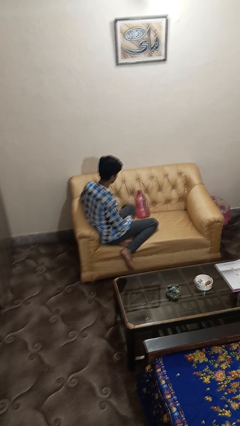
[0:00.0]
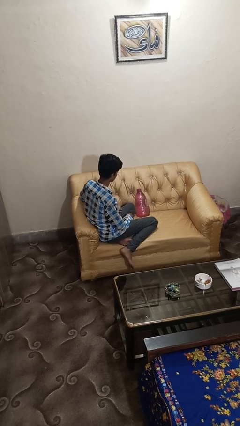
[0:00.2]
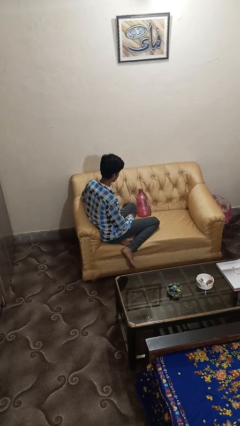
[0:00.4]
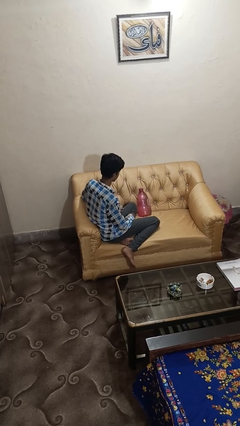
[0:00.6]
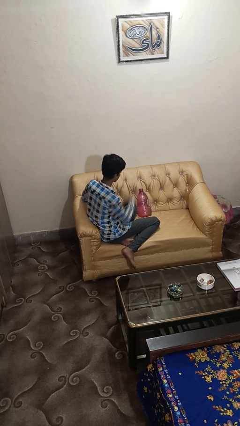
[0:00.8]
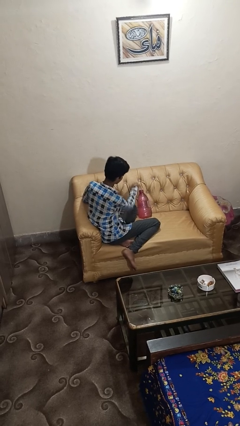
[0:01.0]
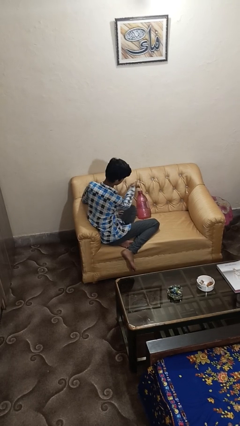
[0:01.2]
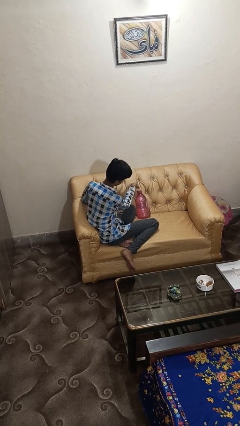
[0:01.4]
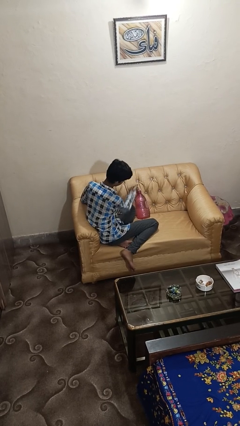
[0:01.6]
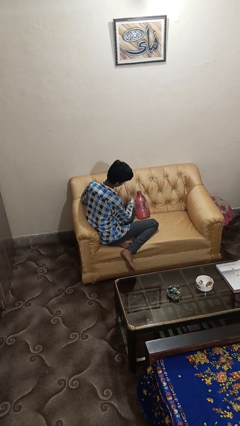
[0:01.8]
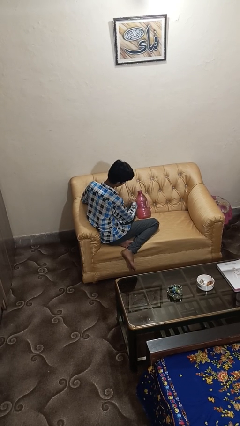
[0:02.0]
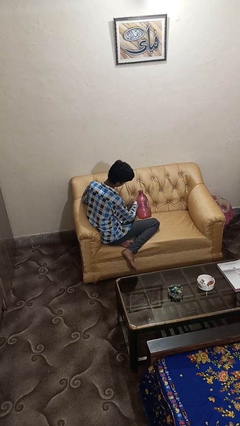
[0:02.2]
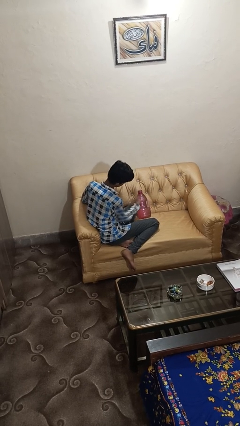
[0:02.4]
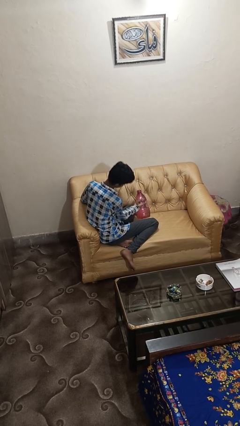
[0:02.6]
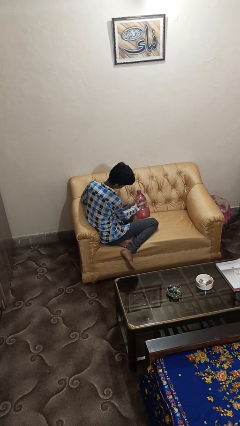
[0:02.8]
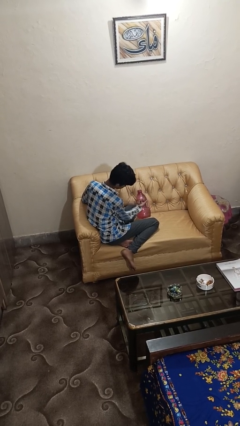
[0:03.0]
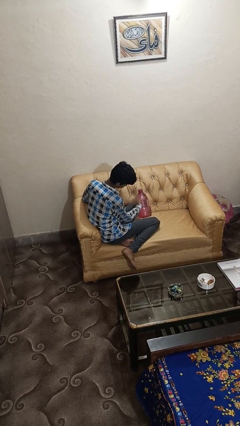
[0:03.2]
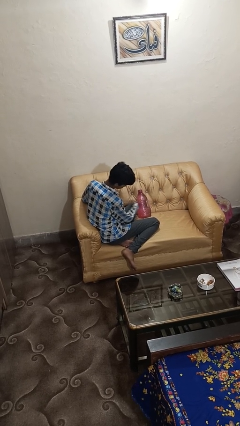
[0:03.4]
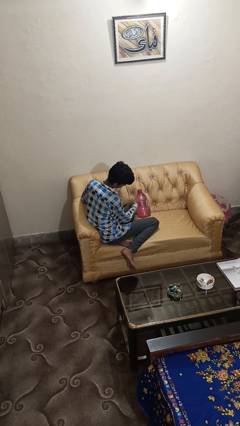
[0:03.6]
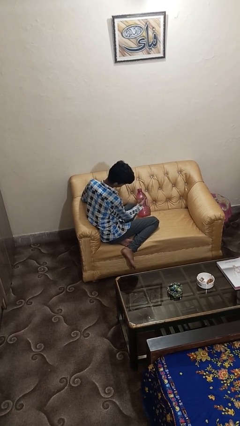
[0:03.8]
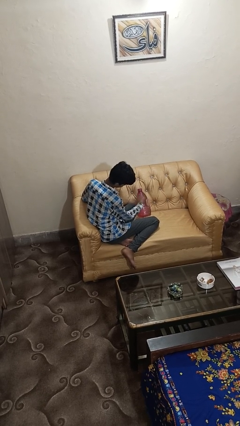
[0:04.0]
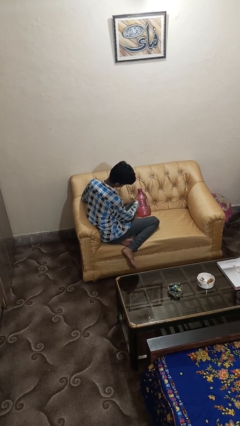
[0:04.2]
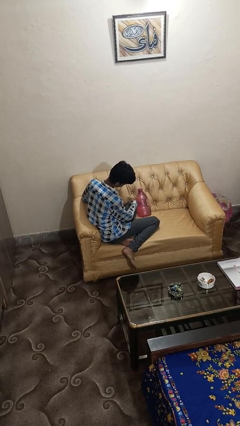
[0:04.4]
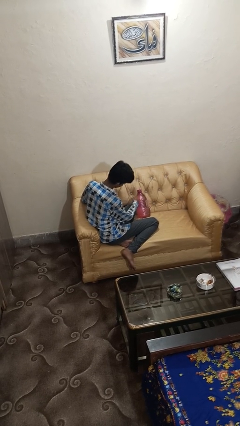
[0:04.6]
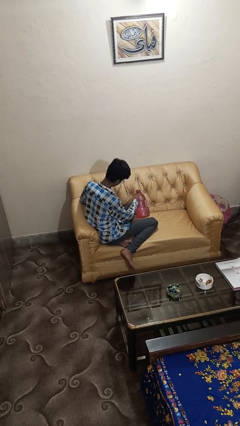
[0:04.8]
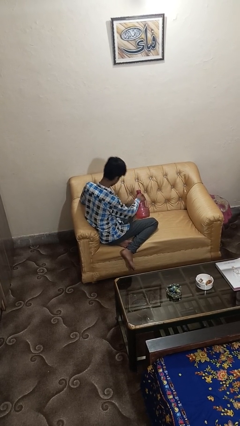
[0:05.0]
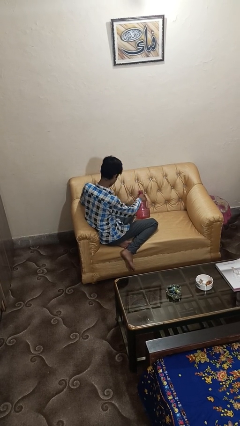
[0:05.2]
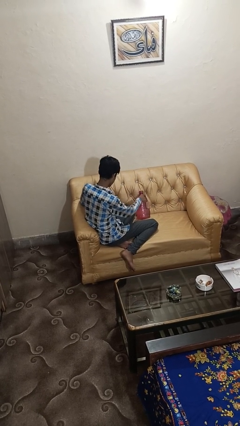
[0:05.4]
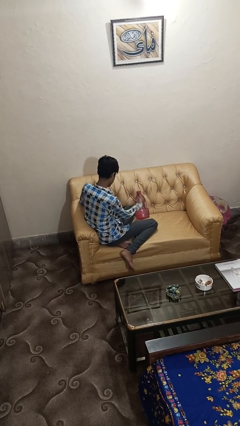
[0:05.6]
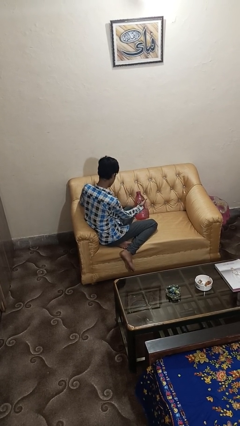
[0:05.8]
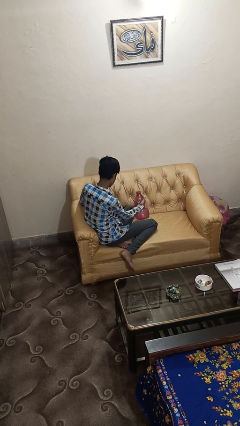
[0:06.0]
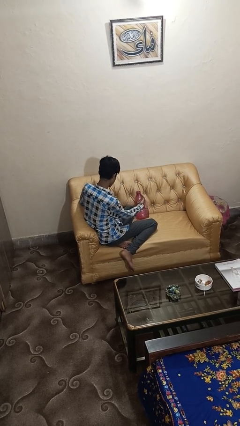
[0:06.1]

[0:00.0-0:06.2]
person taps object with finger

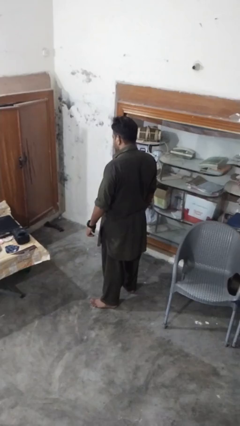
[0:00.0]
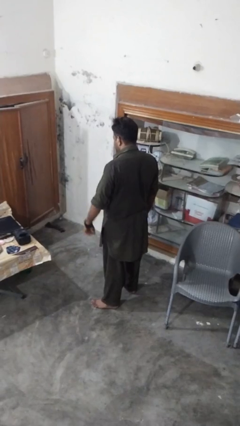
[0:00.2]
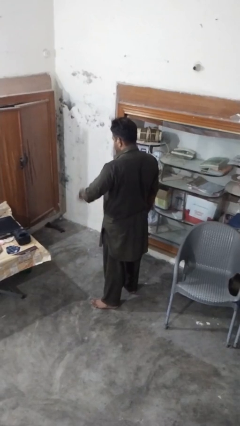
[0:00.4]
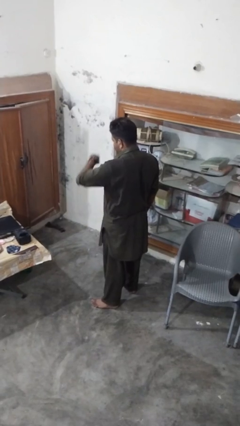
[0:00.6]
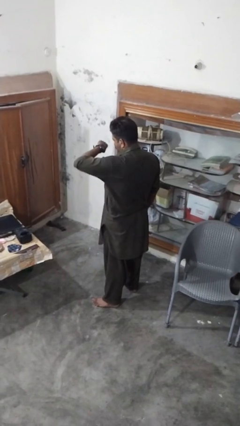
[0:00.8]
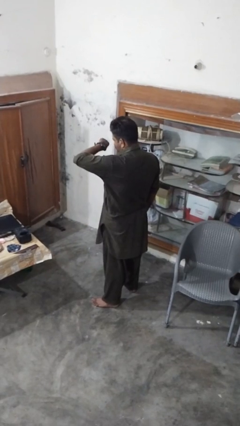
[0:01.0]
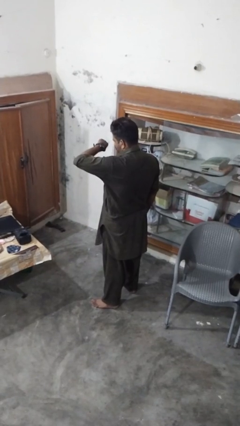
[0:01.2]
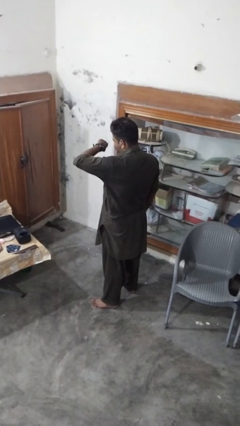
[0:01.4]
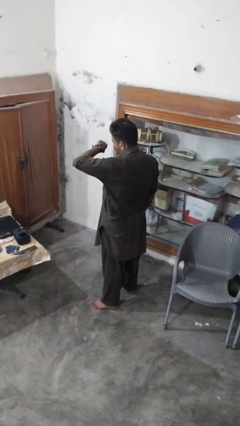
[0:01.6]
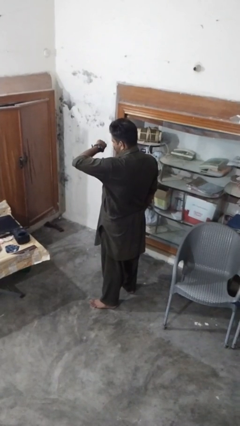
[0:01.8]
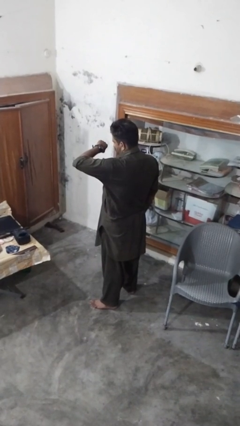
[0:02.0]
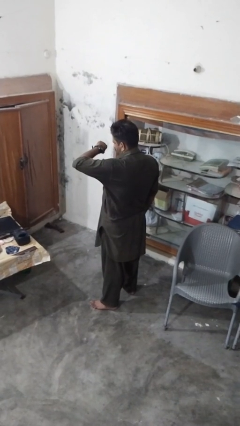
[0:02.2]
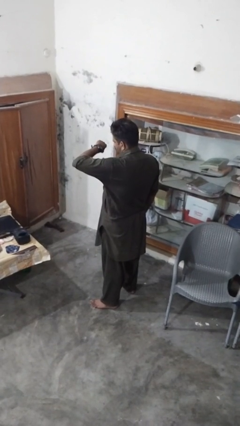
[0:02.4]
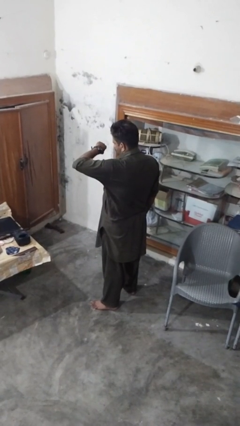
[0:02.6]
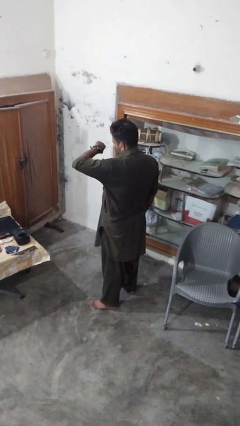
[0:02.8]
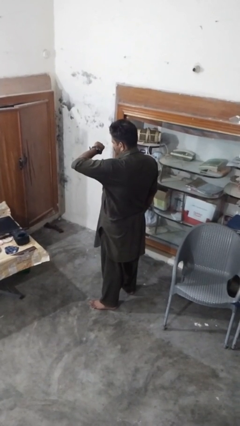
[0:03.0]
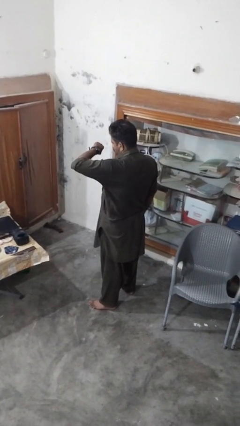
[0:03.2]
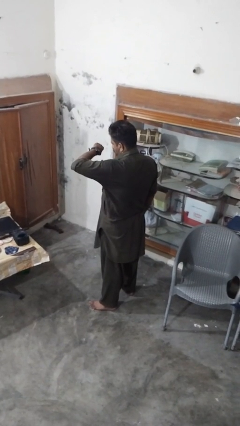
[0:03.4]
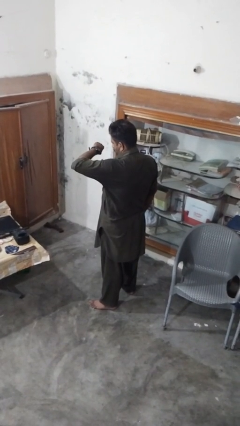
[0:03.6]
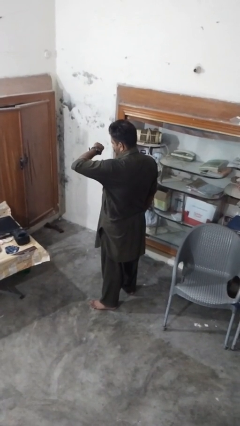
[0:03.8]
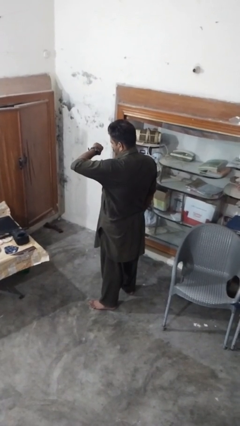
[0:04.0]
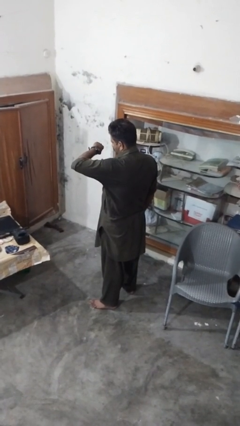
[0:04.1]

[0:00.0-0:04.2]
person looks at wristwatch

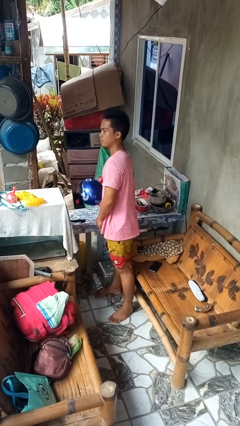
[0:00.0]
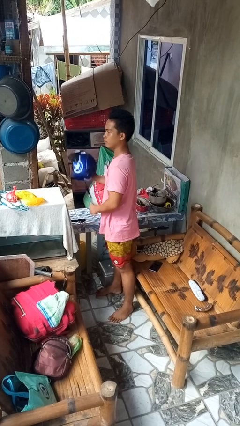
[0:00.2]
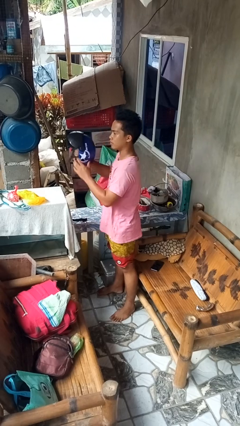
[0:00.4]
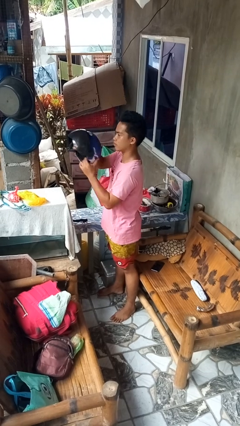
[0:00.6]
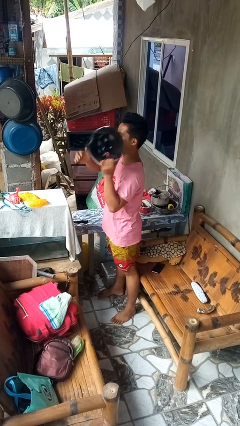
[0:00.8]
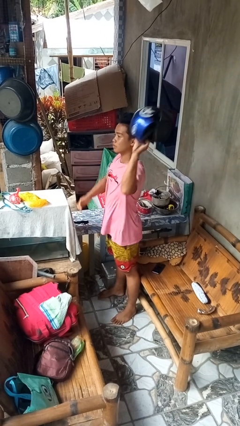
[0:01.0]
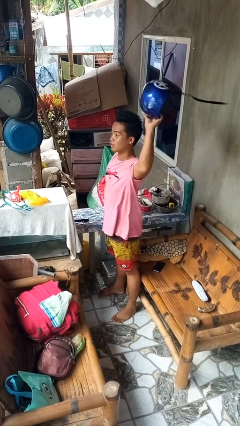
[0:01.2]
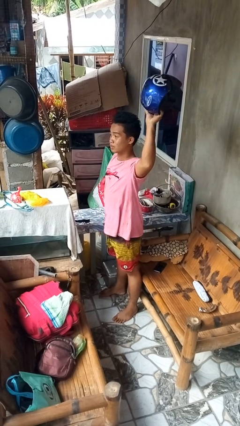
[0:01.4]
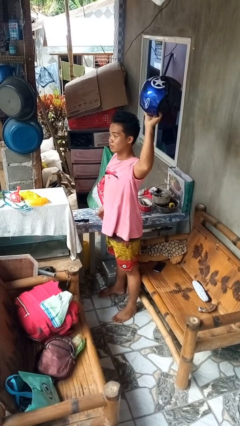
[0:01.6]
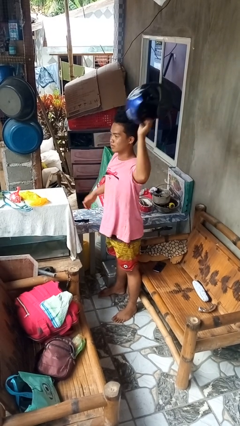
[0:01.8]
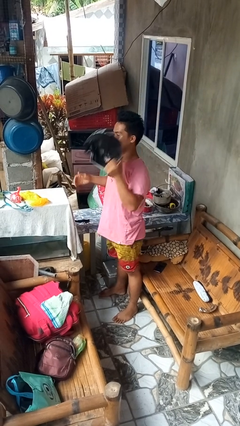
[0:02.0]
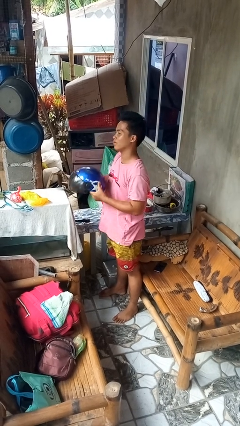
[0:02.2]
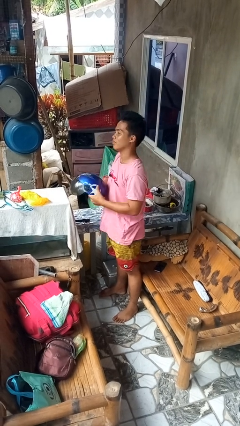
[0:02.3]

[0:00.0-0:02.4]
person holds object above head

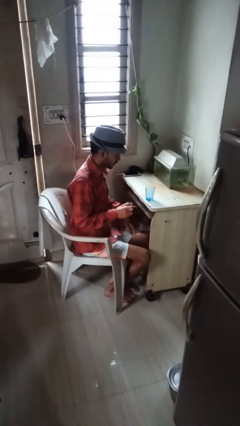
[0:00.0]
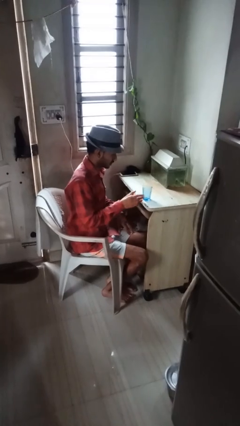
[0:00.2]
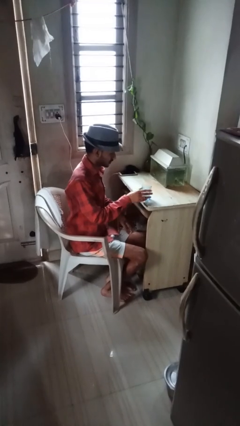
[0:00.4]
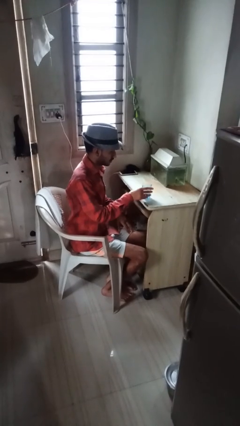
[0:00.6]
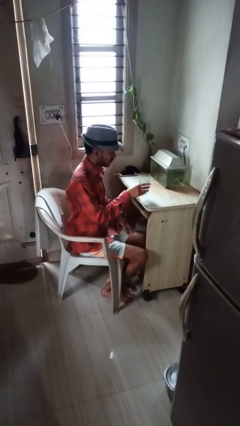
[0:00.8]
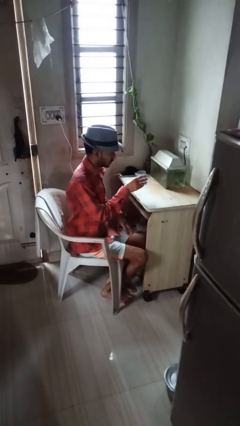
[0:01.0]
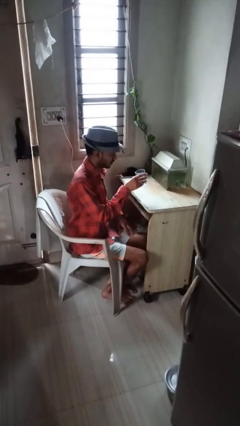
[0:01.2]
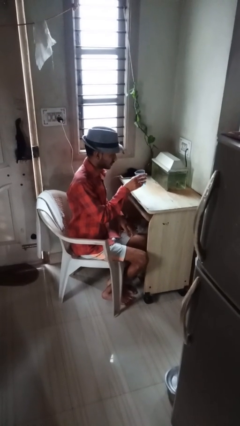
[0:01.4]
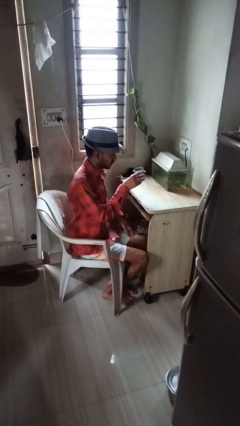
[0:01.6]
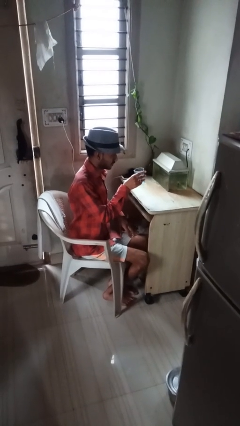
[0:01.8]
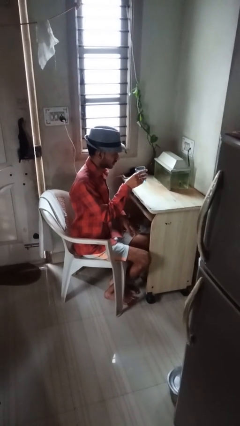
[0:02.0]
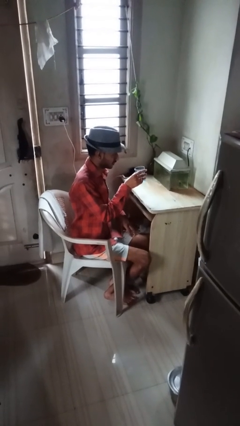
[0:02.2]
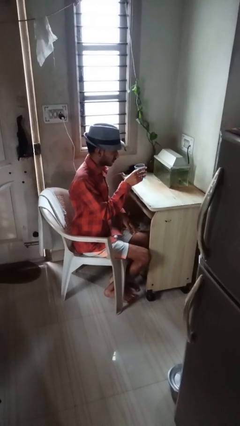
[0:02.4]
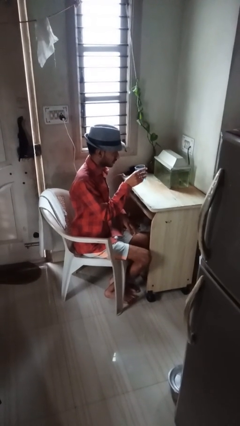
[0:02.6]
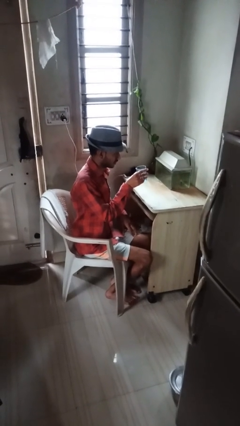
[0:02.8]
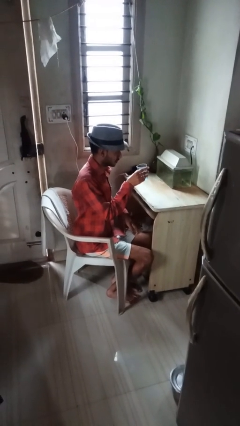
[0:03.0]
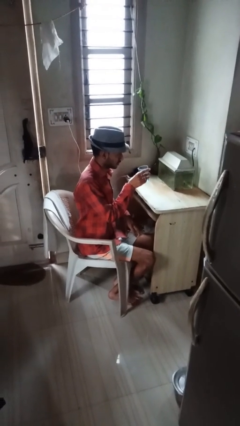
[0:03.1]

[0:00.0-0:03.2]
person picks up object from table

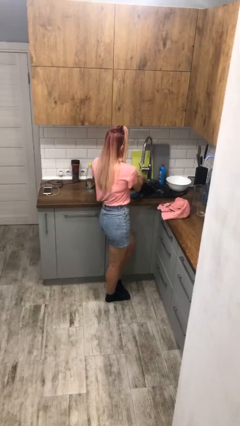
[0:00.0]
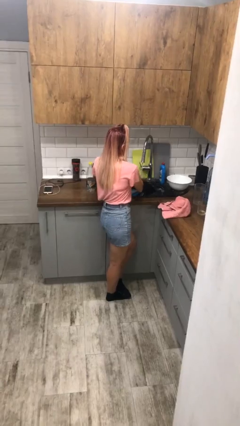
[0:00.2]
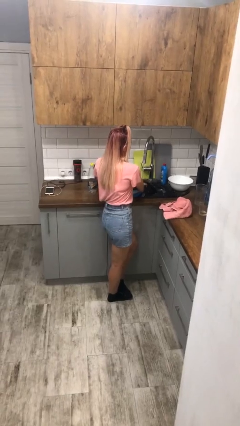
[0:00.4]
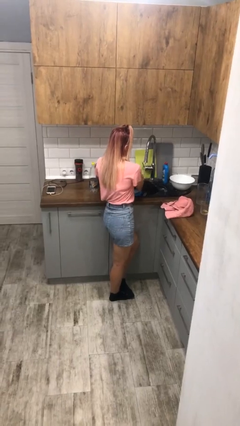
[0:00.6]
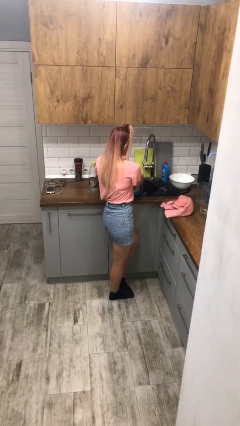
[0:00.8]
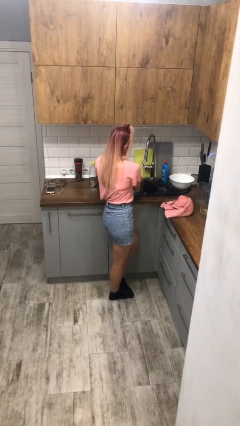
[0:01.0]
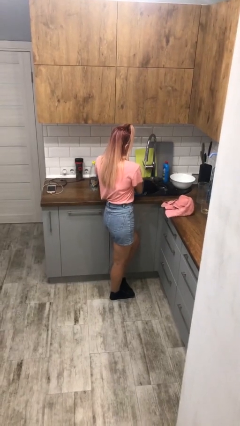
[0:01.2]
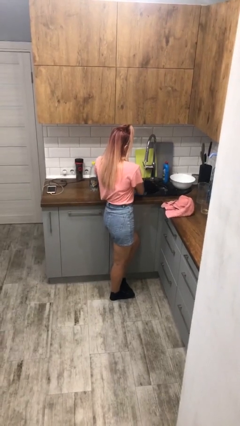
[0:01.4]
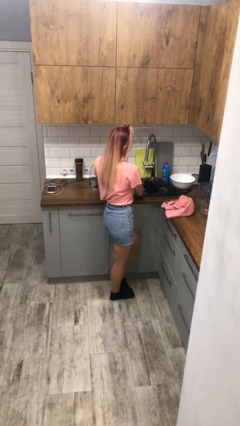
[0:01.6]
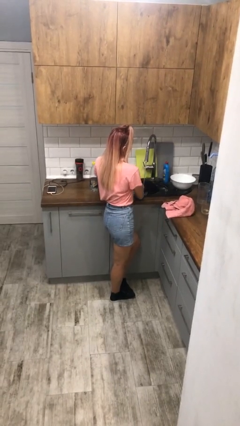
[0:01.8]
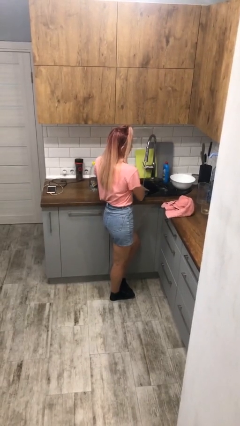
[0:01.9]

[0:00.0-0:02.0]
person washes hands
